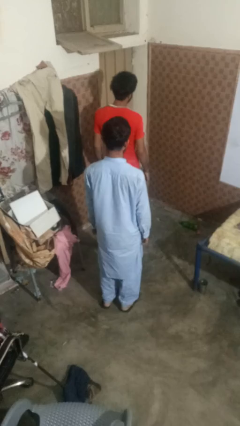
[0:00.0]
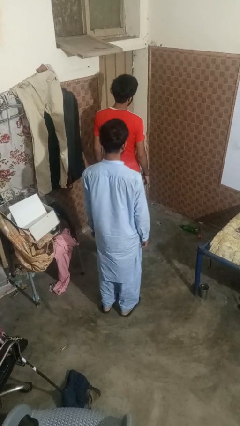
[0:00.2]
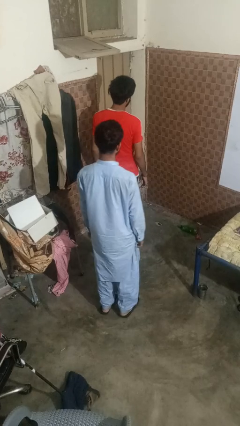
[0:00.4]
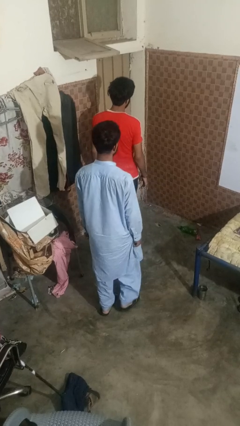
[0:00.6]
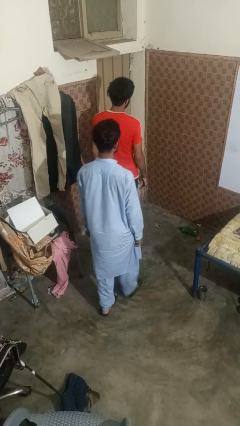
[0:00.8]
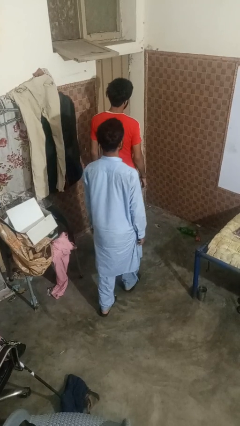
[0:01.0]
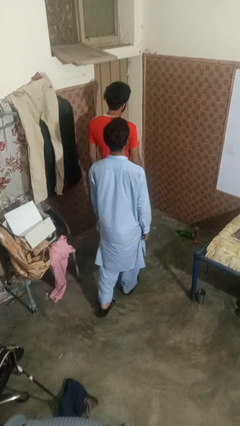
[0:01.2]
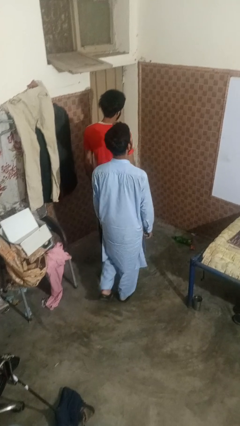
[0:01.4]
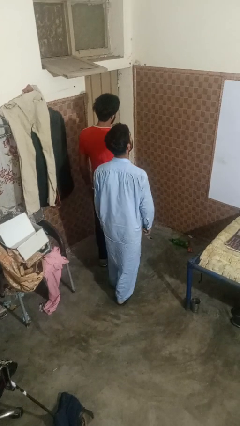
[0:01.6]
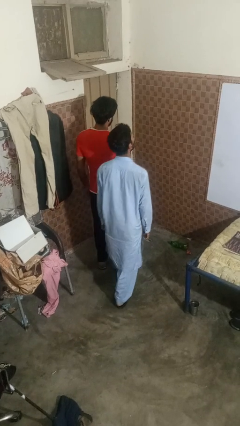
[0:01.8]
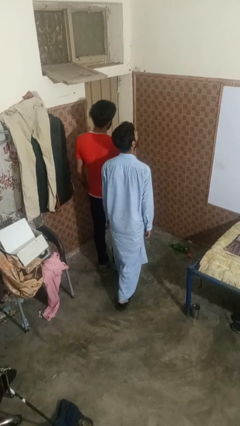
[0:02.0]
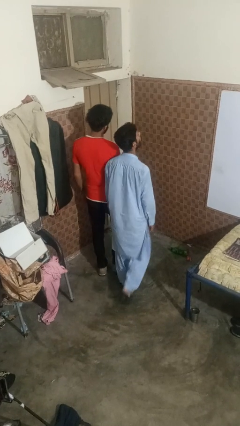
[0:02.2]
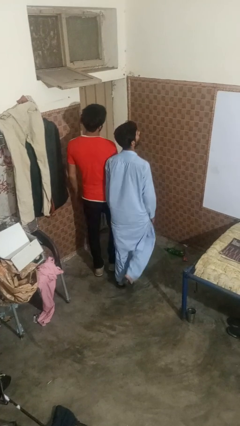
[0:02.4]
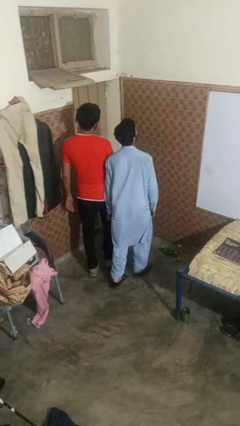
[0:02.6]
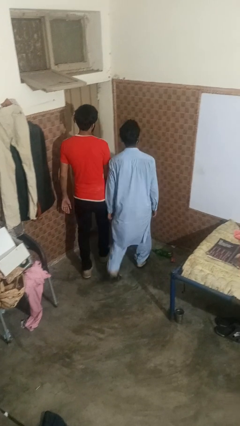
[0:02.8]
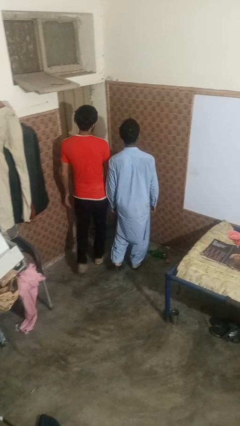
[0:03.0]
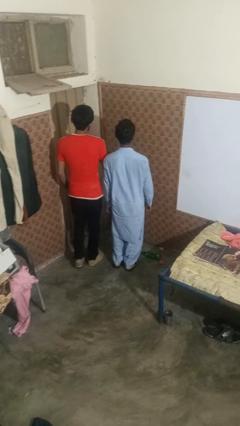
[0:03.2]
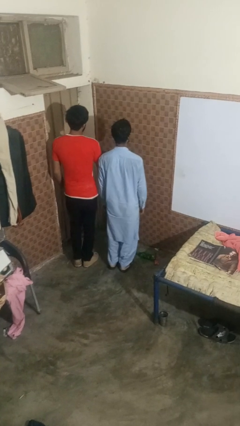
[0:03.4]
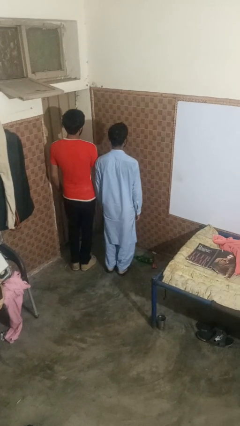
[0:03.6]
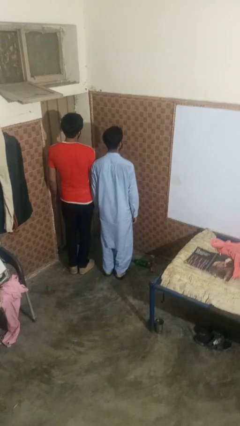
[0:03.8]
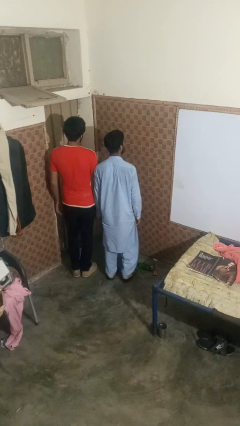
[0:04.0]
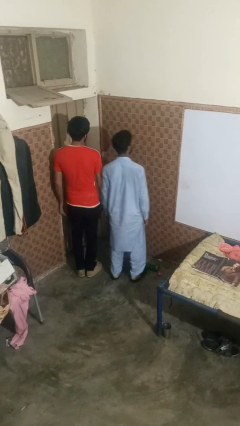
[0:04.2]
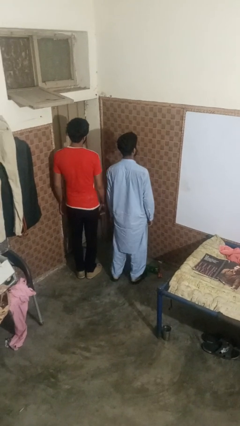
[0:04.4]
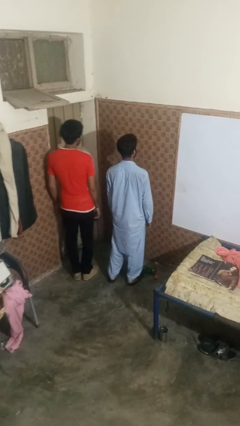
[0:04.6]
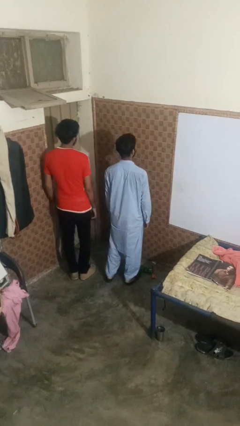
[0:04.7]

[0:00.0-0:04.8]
person bumps into person

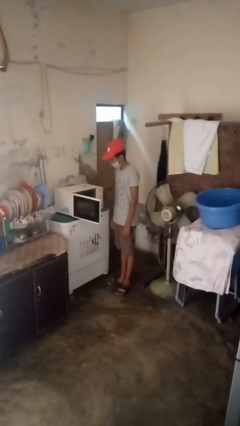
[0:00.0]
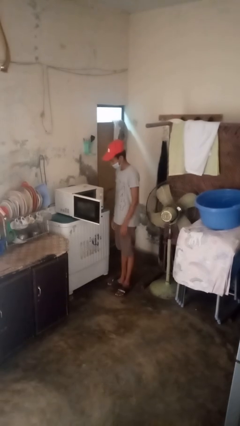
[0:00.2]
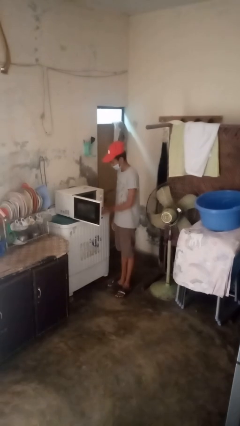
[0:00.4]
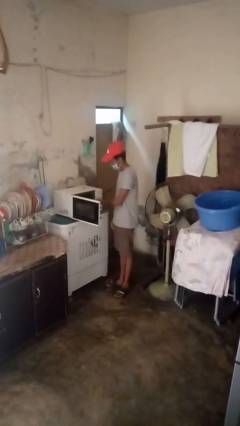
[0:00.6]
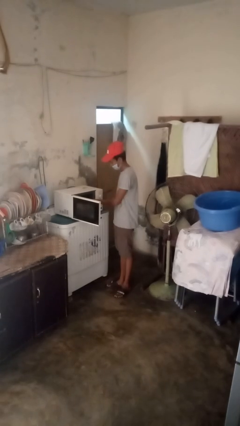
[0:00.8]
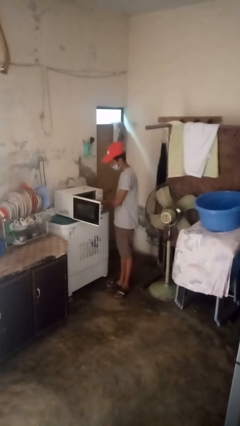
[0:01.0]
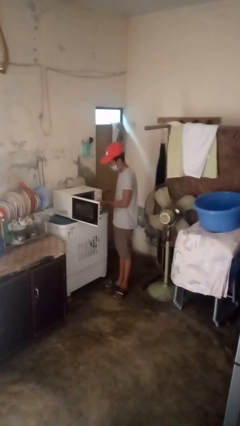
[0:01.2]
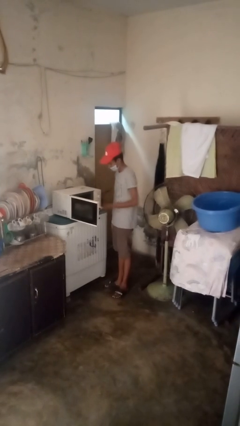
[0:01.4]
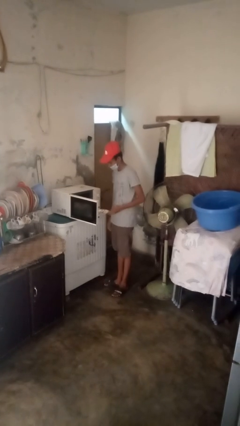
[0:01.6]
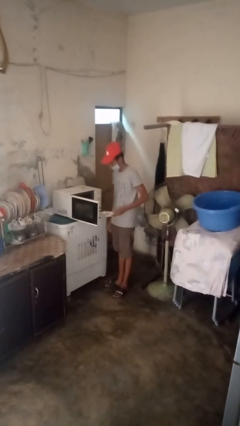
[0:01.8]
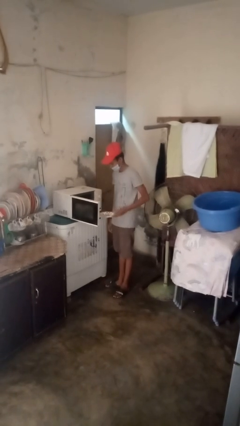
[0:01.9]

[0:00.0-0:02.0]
person takes object from microwave

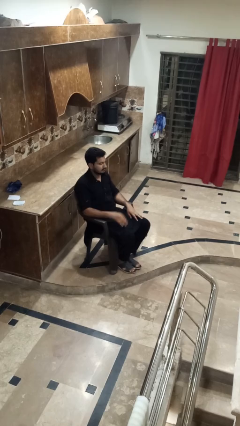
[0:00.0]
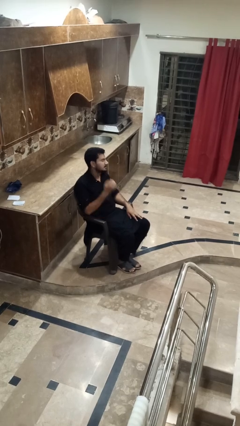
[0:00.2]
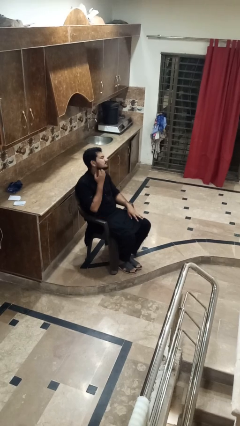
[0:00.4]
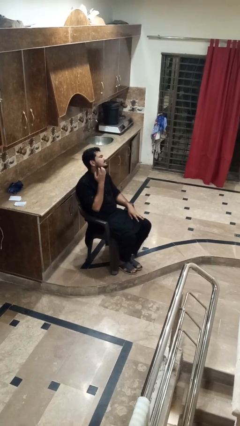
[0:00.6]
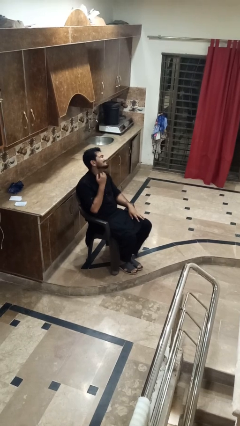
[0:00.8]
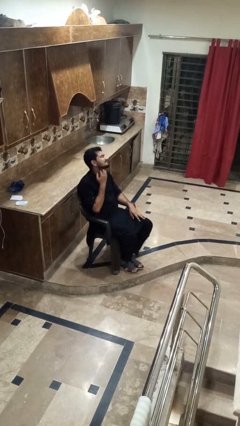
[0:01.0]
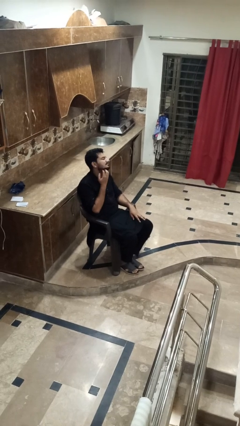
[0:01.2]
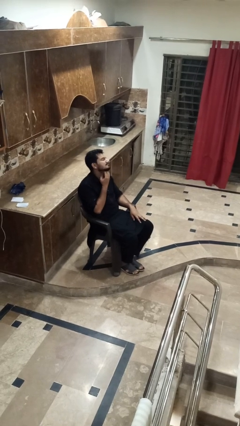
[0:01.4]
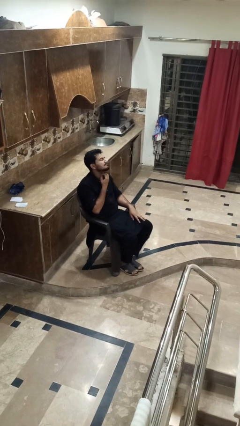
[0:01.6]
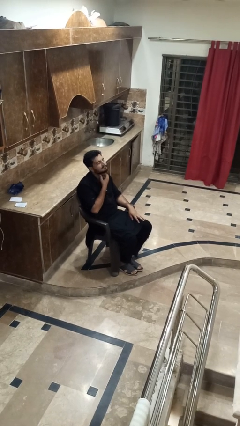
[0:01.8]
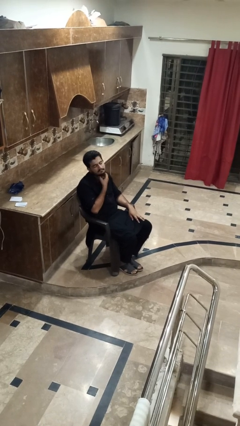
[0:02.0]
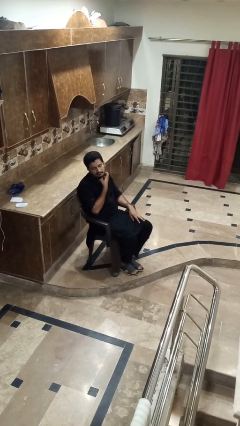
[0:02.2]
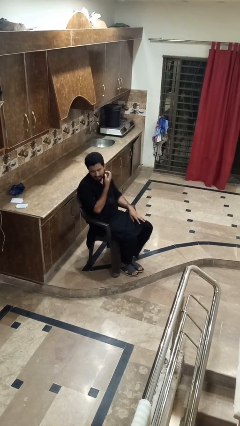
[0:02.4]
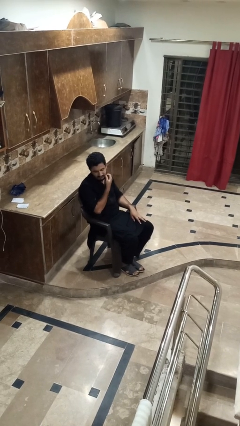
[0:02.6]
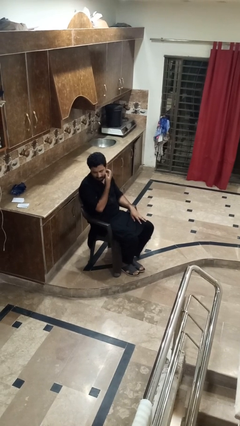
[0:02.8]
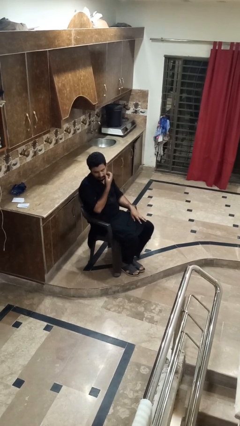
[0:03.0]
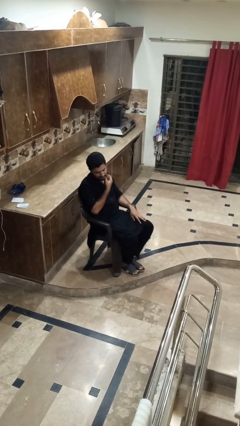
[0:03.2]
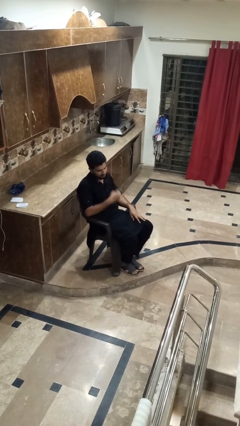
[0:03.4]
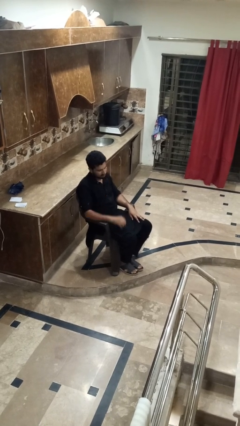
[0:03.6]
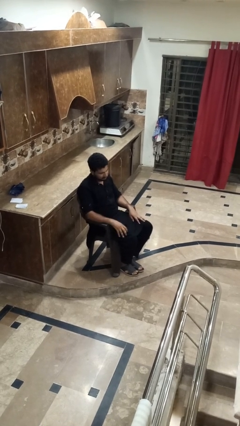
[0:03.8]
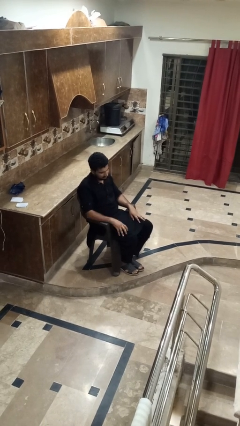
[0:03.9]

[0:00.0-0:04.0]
person scratches face

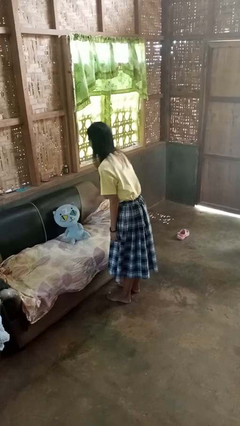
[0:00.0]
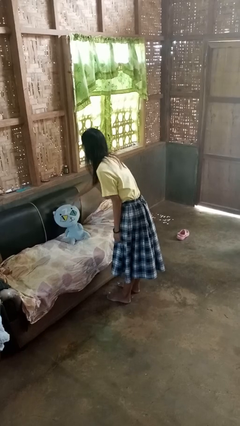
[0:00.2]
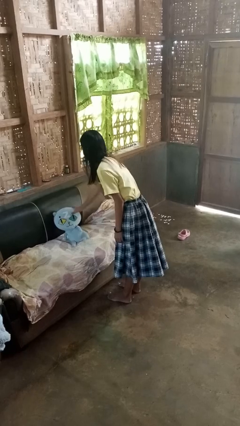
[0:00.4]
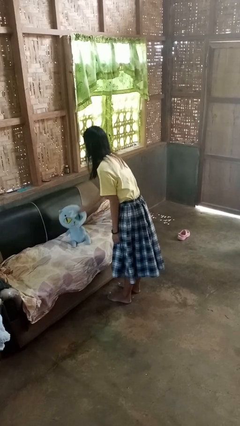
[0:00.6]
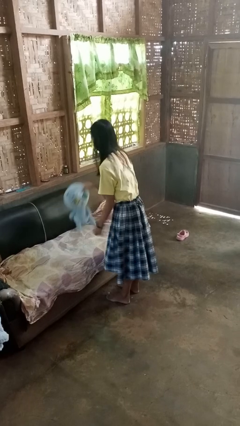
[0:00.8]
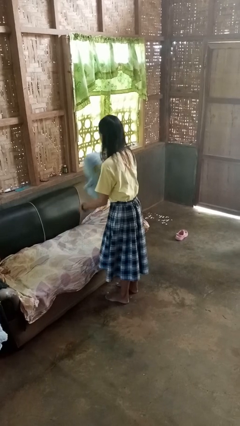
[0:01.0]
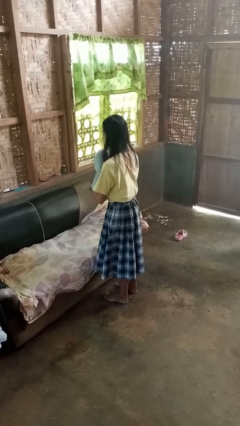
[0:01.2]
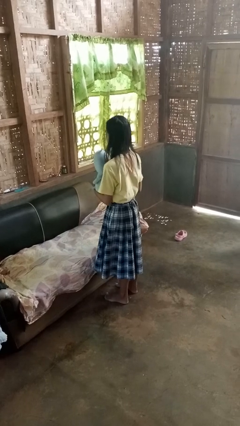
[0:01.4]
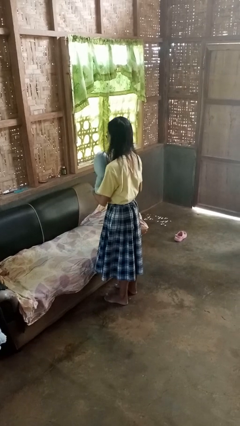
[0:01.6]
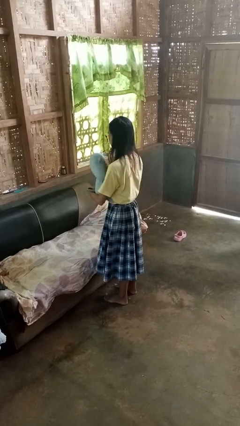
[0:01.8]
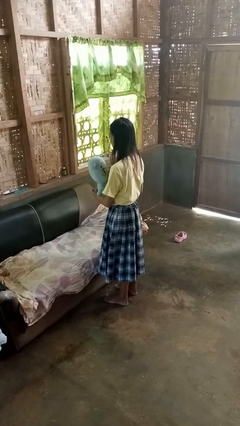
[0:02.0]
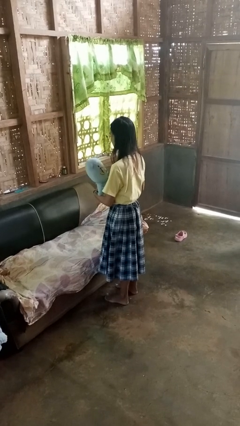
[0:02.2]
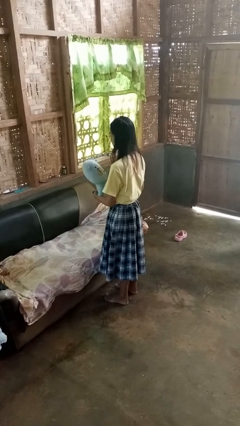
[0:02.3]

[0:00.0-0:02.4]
person picks up object from couch

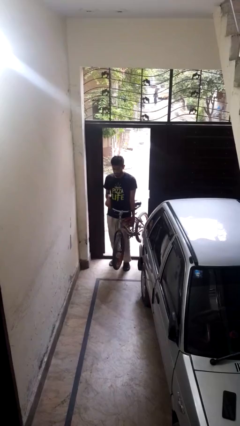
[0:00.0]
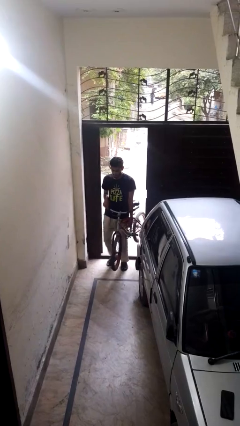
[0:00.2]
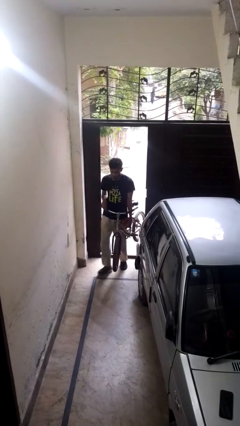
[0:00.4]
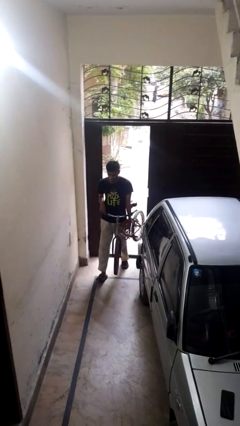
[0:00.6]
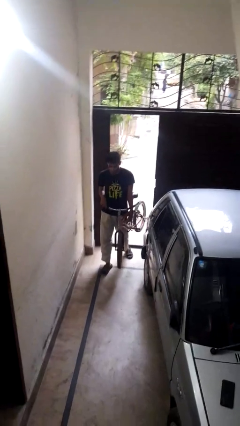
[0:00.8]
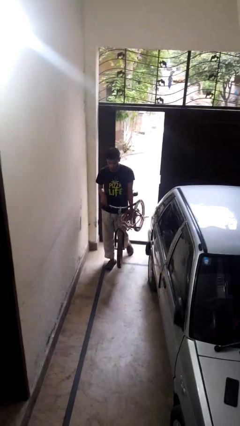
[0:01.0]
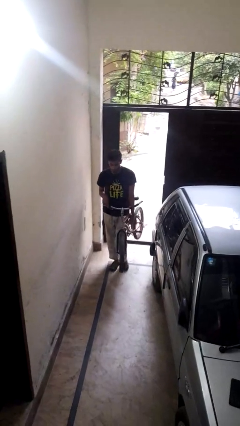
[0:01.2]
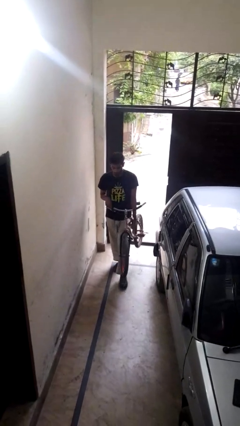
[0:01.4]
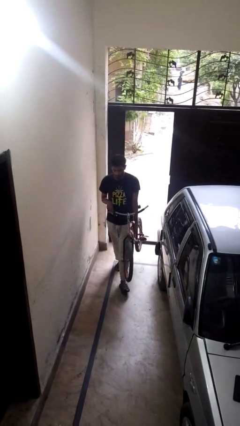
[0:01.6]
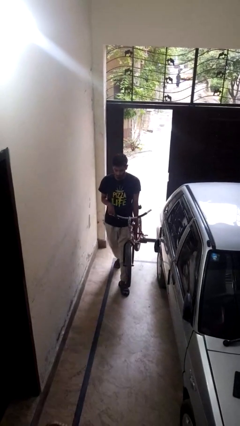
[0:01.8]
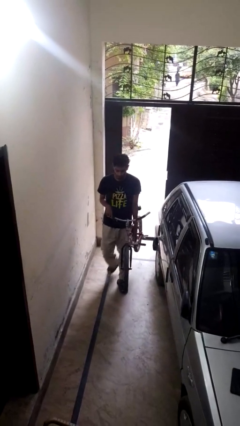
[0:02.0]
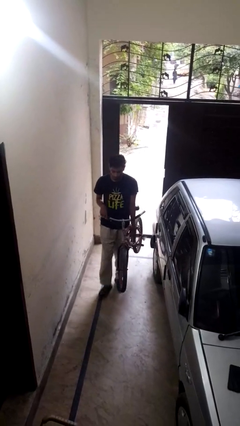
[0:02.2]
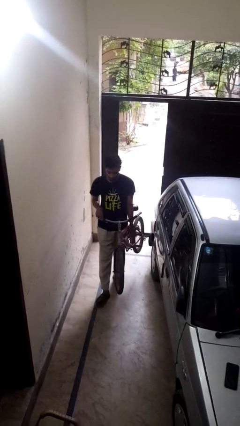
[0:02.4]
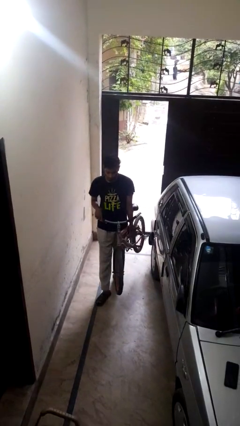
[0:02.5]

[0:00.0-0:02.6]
person carries bicycle

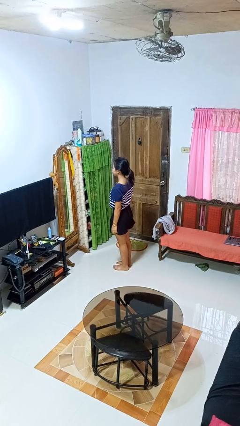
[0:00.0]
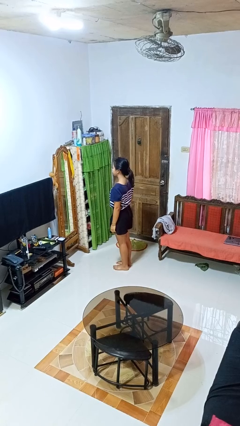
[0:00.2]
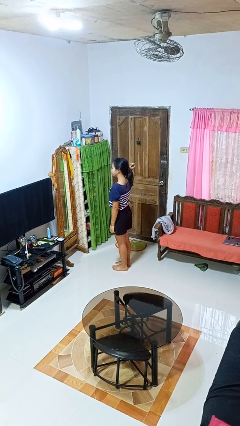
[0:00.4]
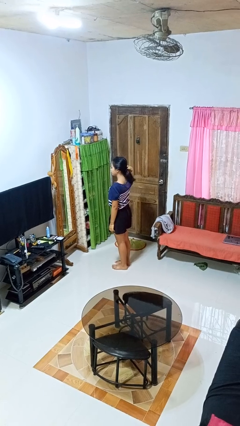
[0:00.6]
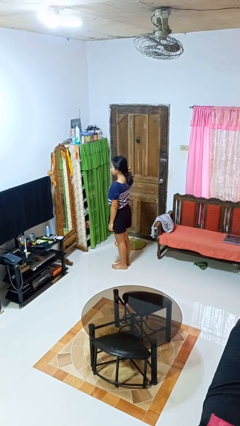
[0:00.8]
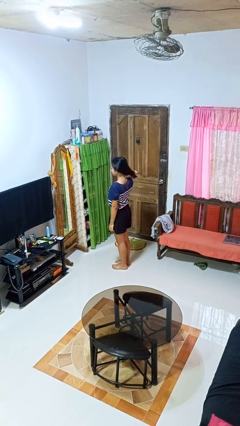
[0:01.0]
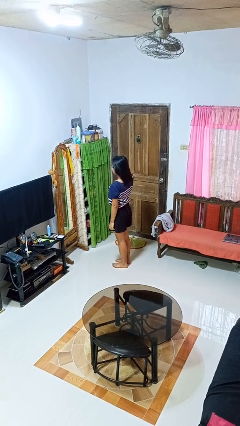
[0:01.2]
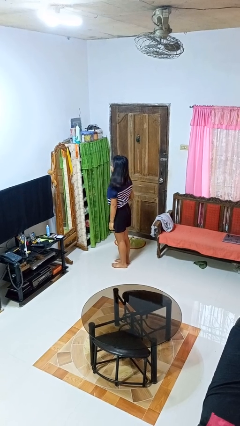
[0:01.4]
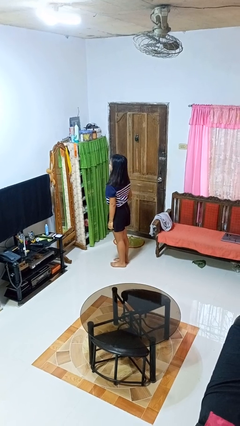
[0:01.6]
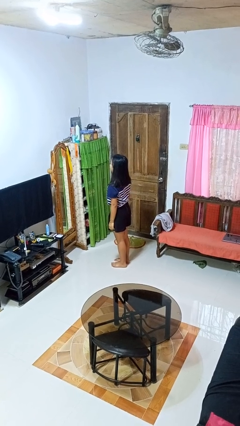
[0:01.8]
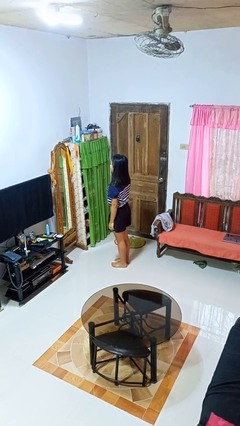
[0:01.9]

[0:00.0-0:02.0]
person takes off hairtie
